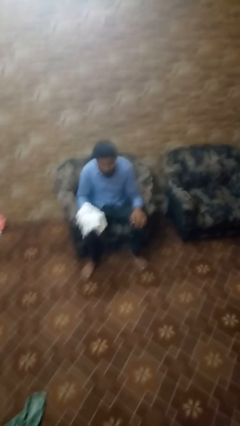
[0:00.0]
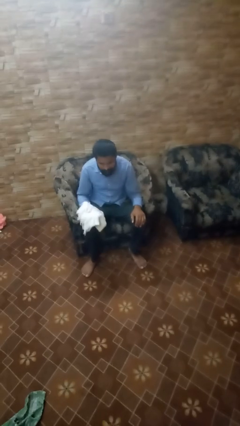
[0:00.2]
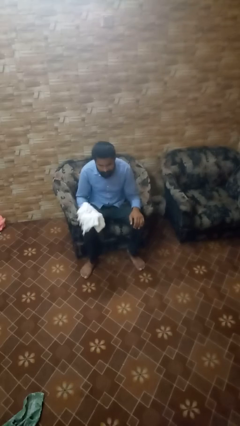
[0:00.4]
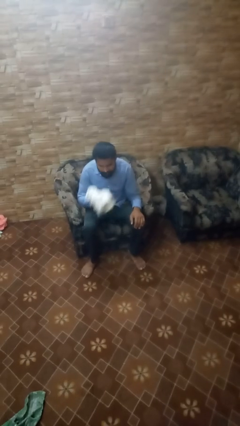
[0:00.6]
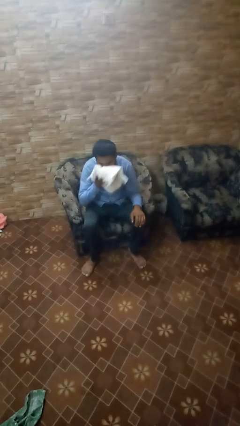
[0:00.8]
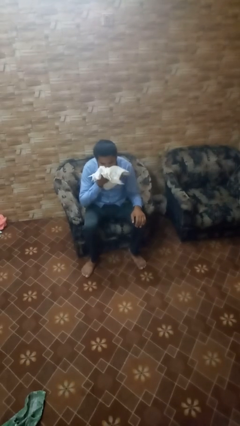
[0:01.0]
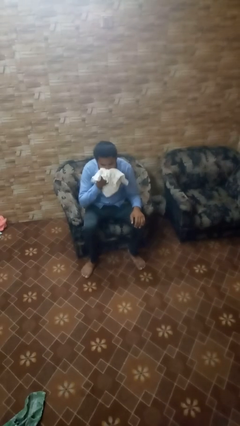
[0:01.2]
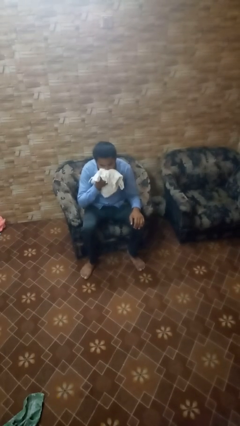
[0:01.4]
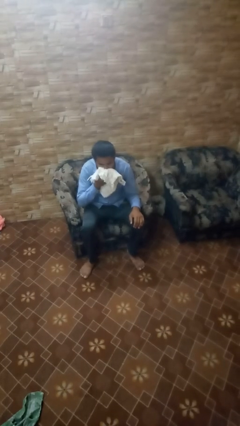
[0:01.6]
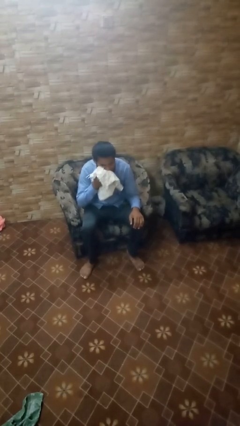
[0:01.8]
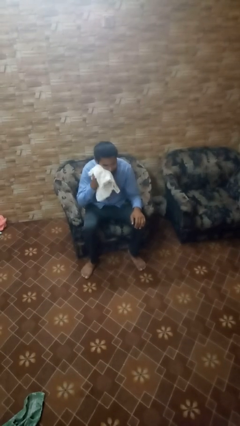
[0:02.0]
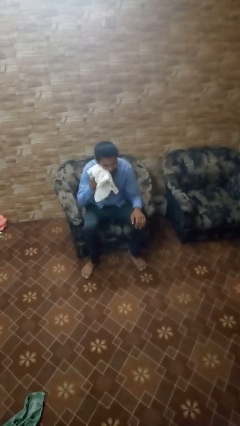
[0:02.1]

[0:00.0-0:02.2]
person wipes mouth with napkin

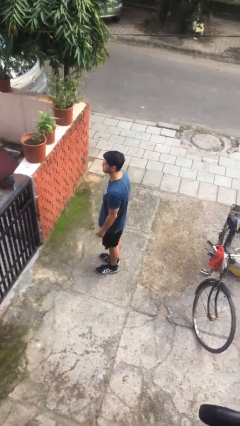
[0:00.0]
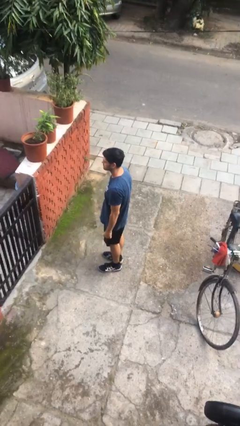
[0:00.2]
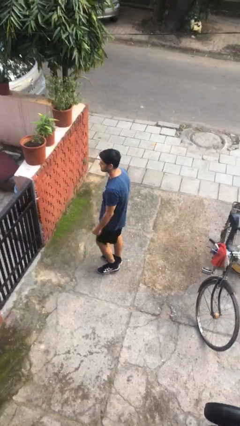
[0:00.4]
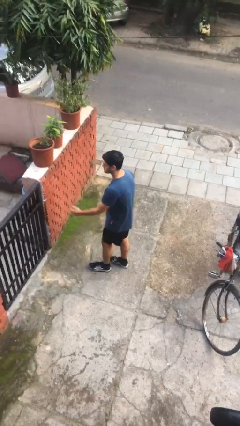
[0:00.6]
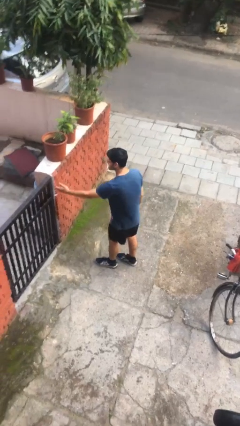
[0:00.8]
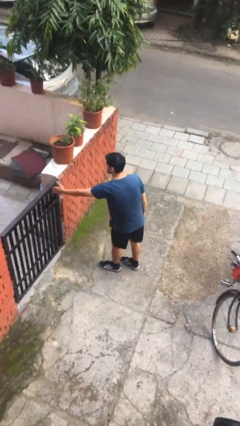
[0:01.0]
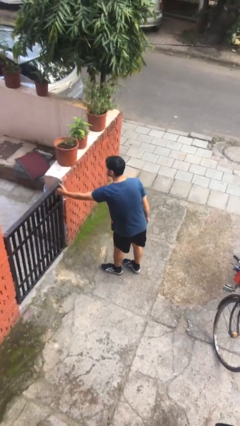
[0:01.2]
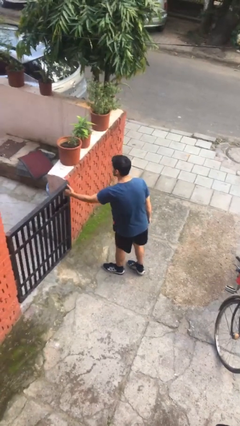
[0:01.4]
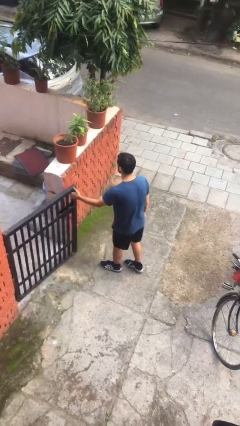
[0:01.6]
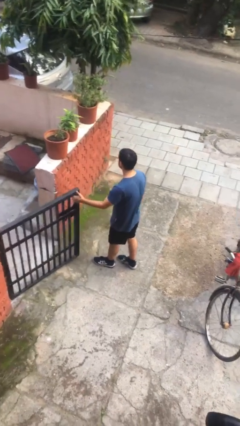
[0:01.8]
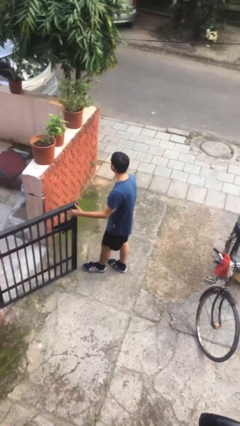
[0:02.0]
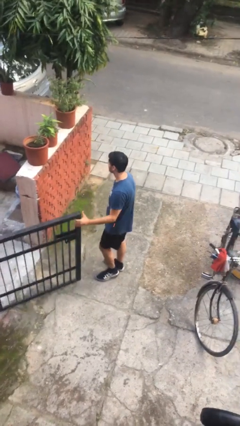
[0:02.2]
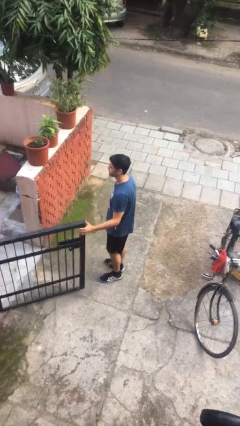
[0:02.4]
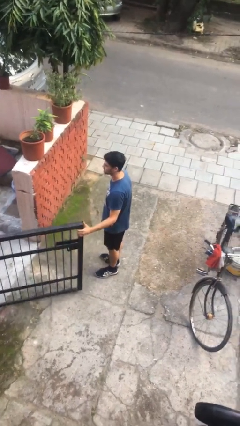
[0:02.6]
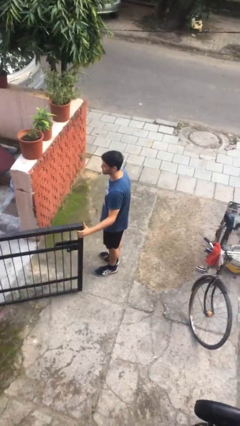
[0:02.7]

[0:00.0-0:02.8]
person opens gate

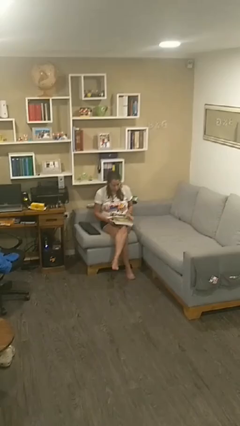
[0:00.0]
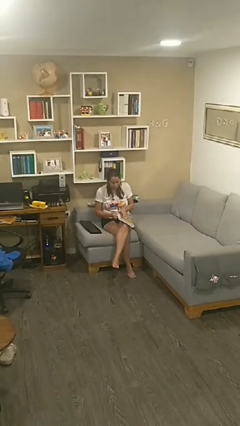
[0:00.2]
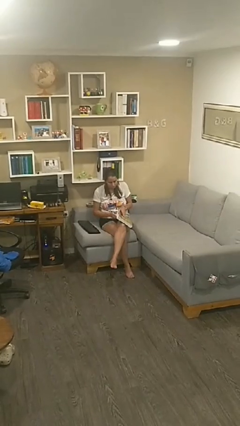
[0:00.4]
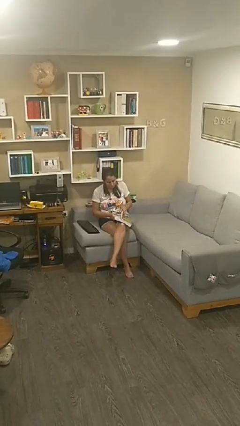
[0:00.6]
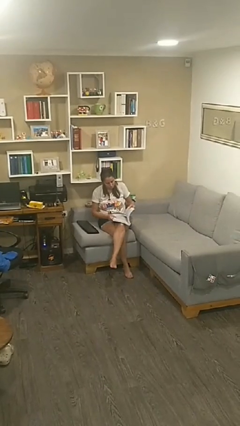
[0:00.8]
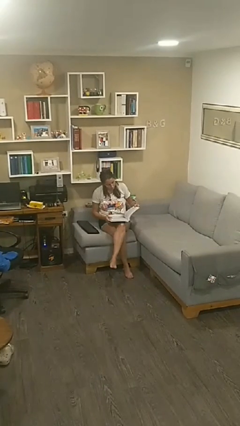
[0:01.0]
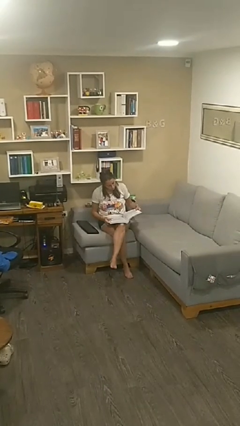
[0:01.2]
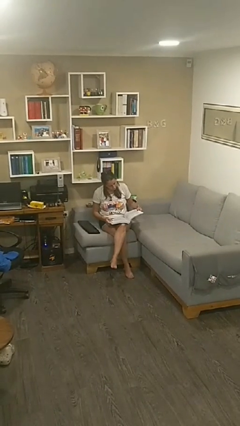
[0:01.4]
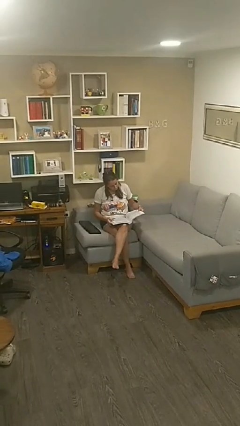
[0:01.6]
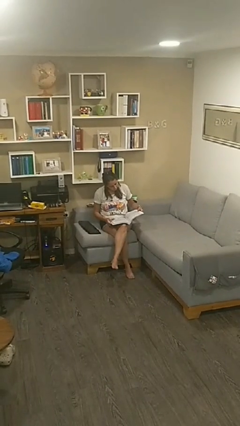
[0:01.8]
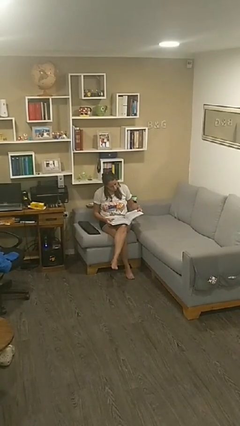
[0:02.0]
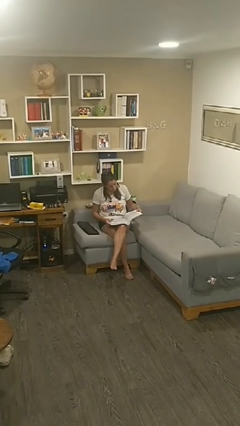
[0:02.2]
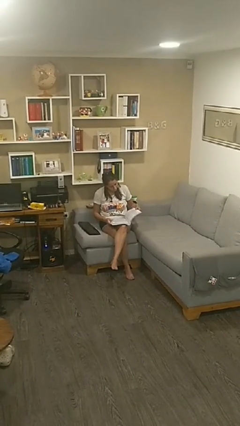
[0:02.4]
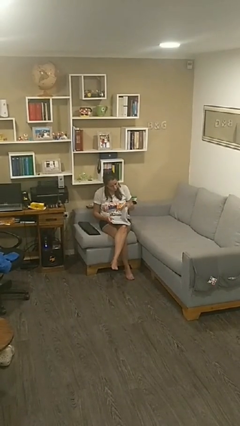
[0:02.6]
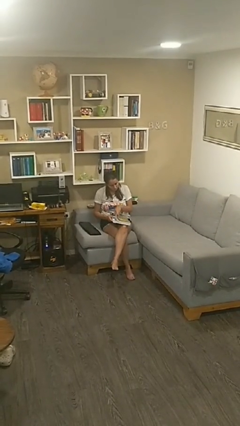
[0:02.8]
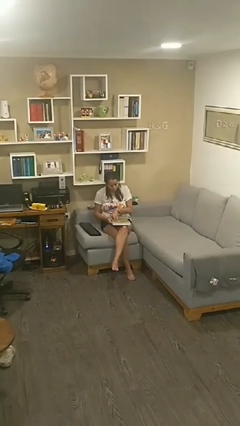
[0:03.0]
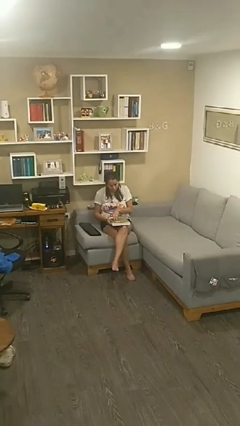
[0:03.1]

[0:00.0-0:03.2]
person reads document

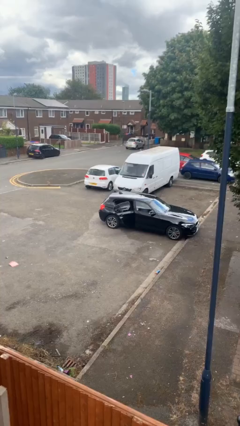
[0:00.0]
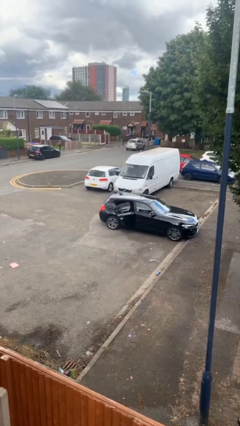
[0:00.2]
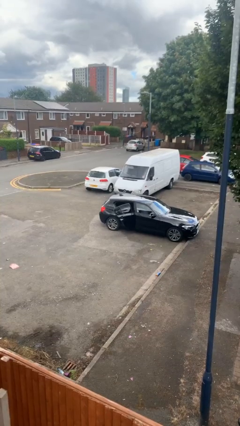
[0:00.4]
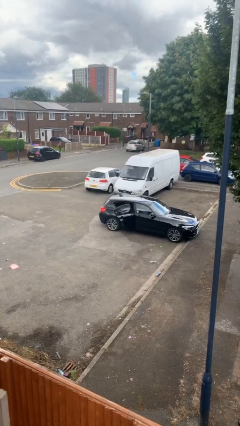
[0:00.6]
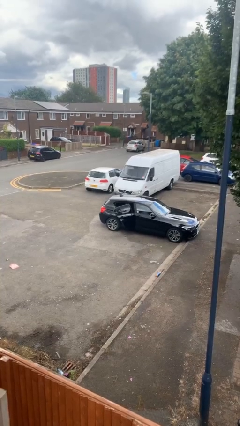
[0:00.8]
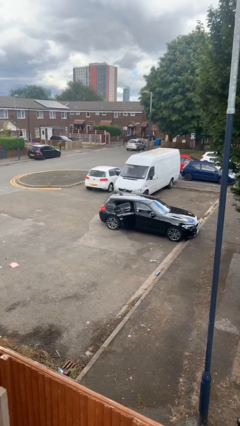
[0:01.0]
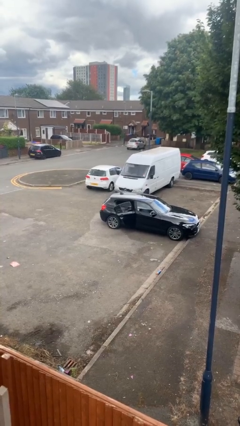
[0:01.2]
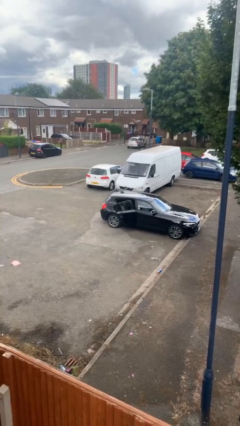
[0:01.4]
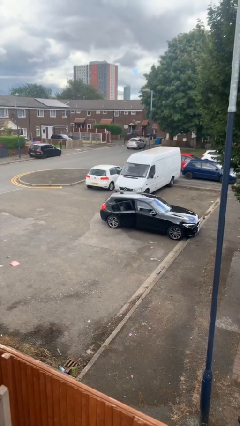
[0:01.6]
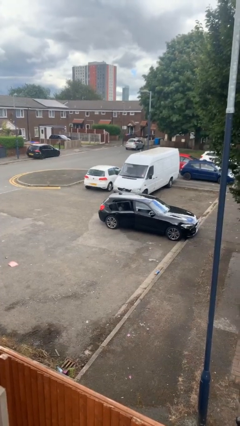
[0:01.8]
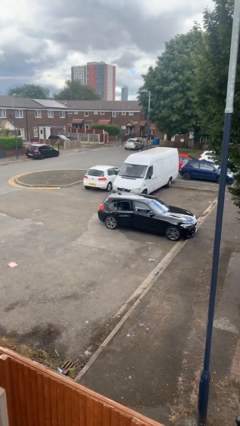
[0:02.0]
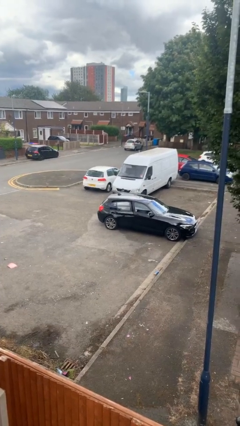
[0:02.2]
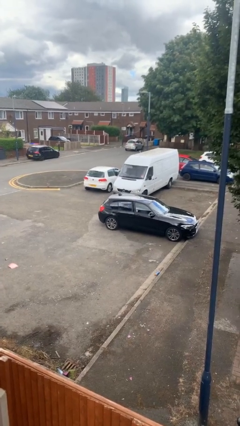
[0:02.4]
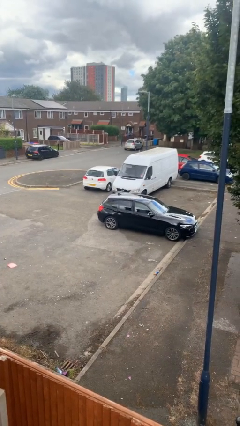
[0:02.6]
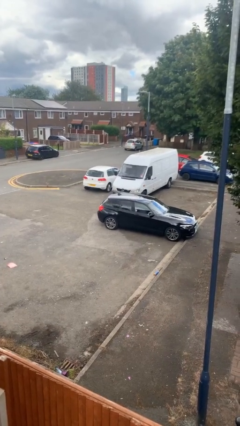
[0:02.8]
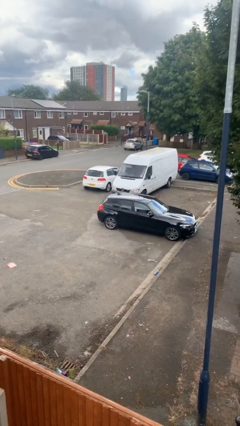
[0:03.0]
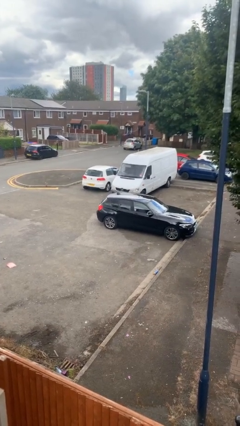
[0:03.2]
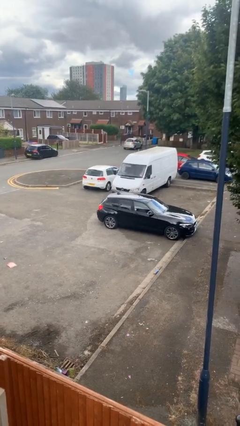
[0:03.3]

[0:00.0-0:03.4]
person closes car door

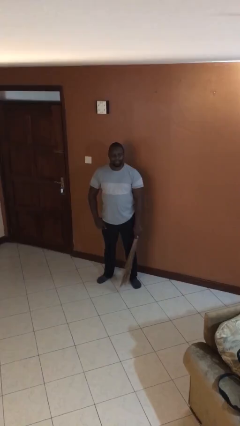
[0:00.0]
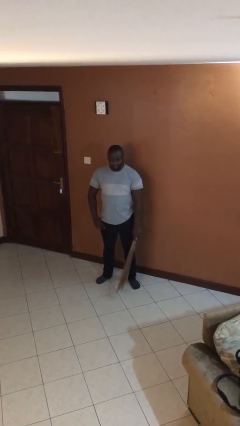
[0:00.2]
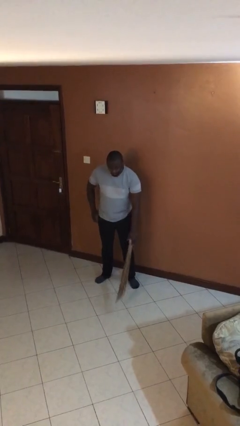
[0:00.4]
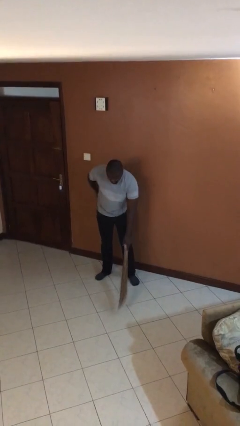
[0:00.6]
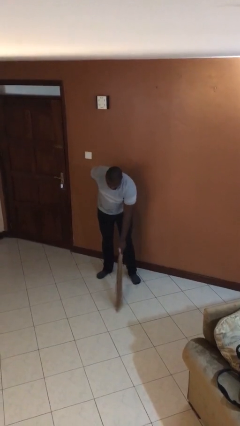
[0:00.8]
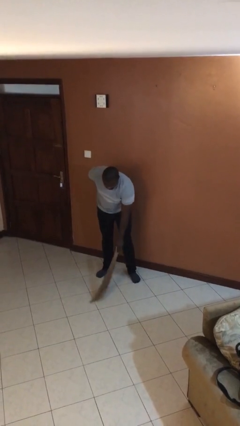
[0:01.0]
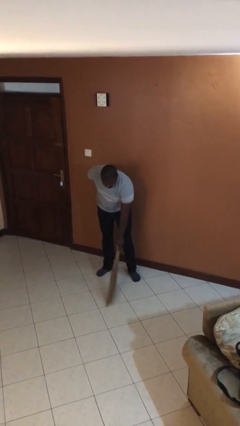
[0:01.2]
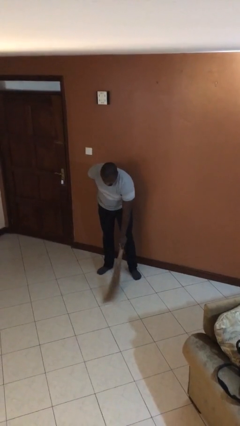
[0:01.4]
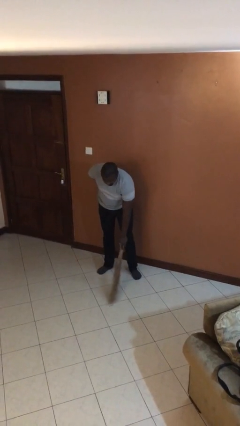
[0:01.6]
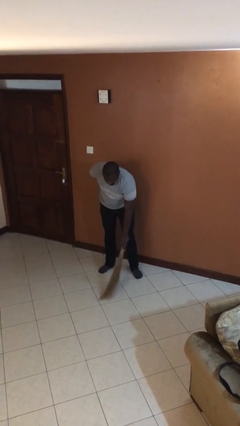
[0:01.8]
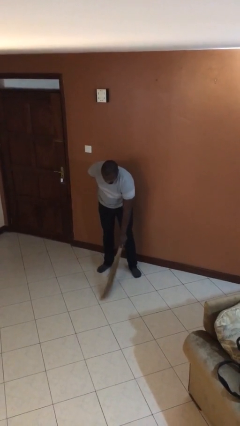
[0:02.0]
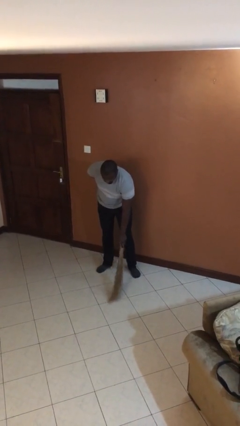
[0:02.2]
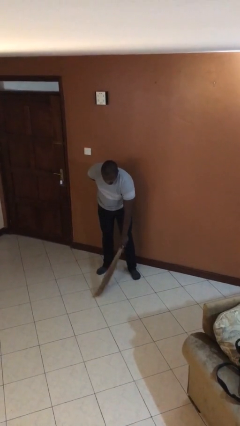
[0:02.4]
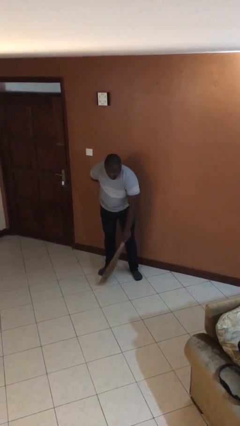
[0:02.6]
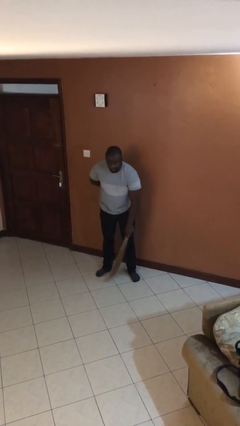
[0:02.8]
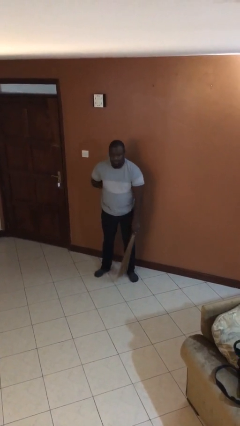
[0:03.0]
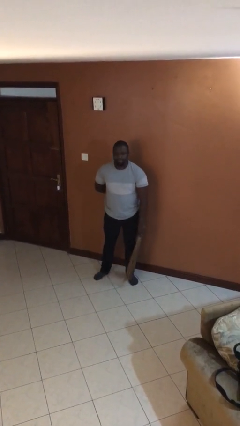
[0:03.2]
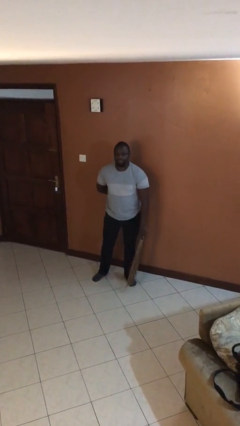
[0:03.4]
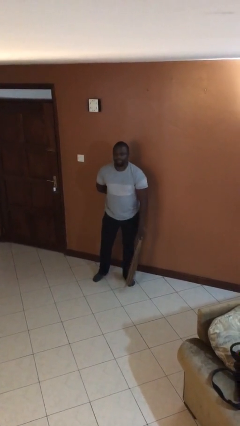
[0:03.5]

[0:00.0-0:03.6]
person sweeps floor

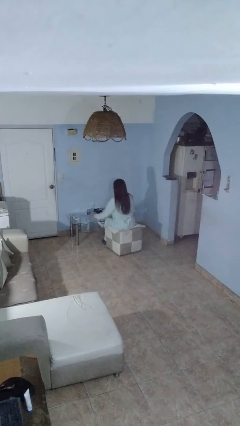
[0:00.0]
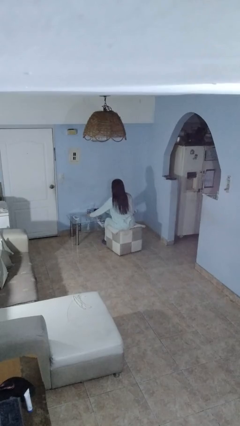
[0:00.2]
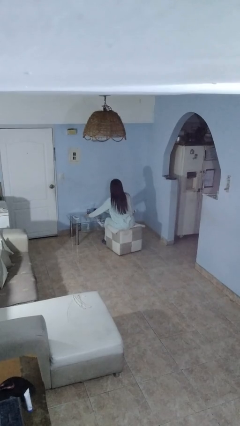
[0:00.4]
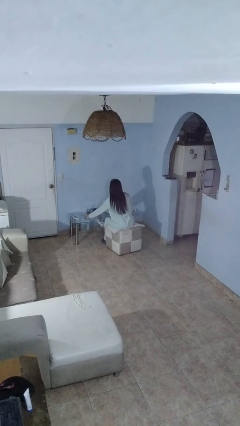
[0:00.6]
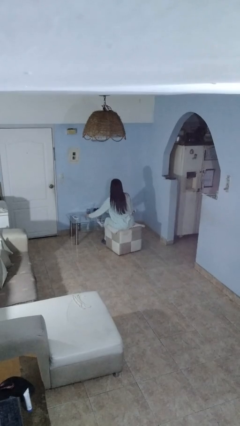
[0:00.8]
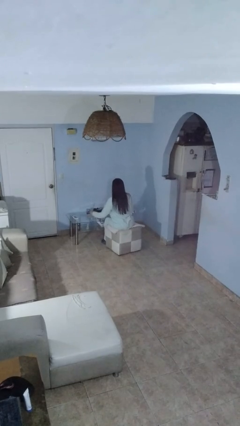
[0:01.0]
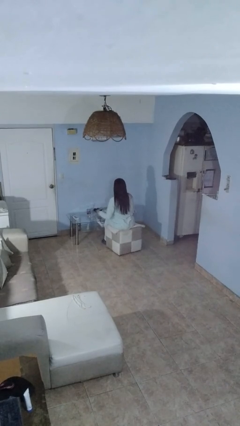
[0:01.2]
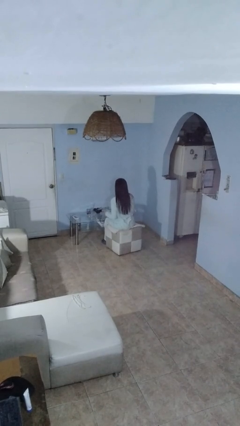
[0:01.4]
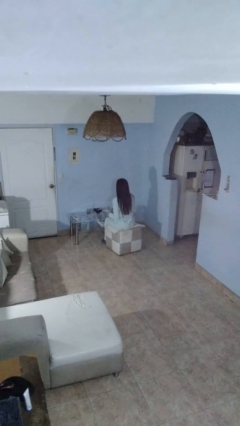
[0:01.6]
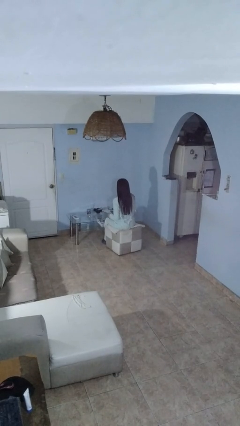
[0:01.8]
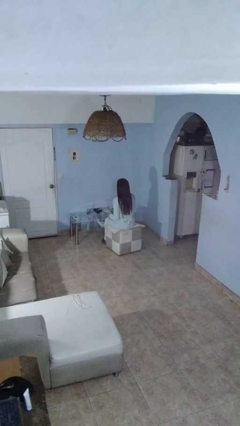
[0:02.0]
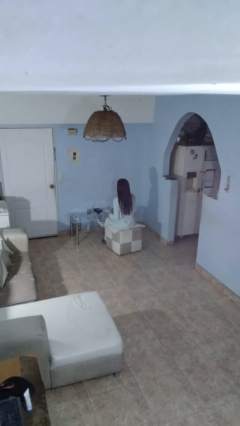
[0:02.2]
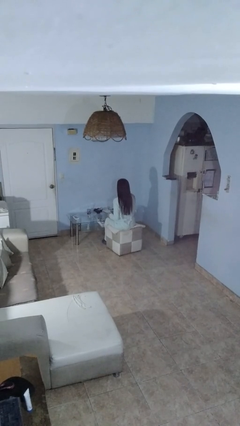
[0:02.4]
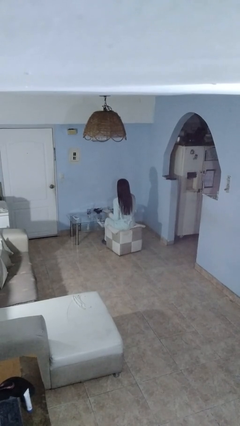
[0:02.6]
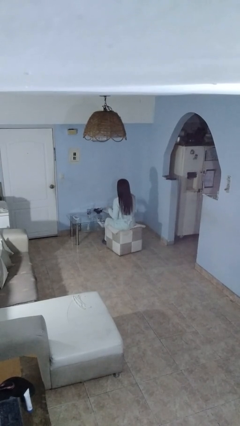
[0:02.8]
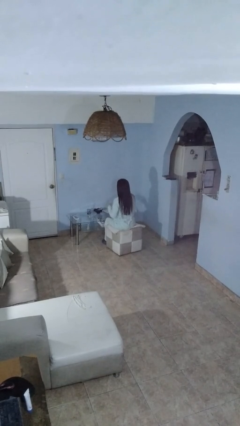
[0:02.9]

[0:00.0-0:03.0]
person picks up object from table
